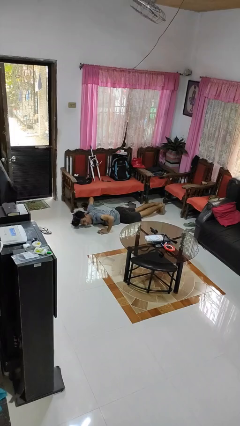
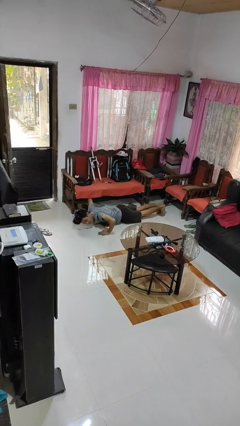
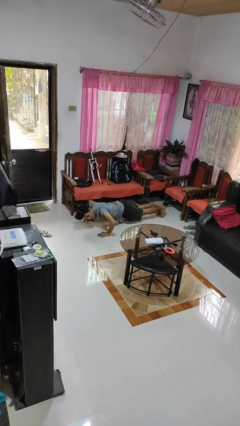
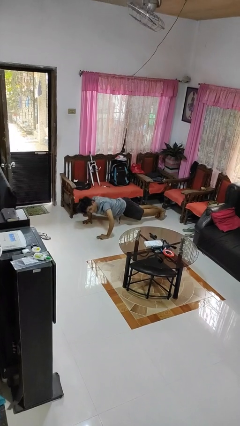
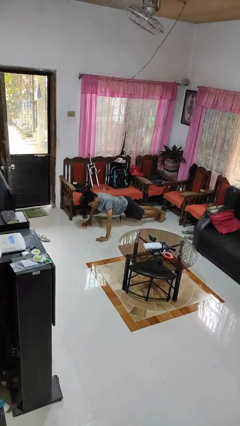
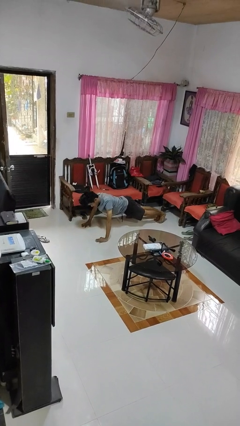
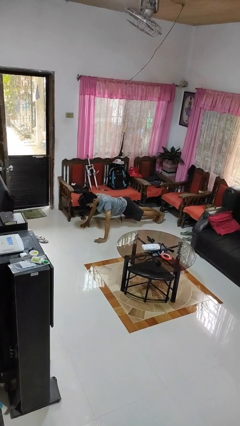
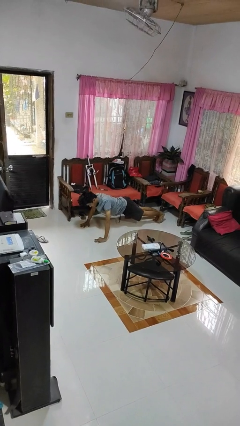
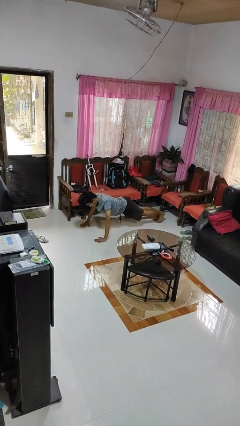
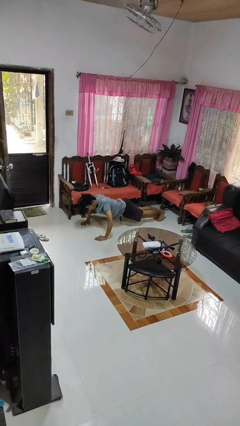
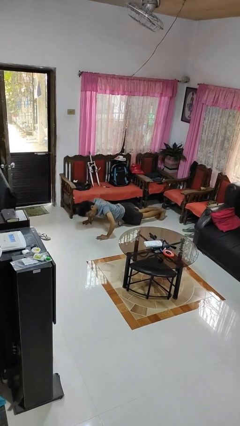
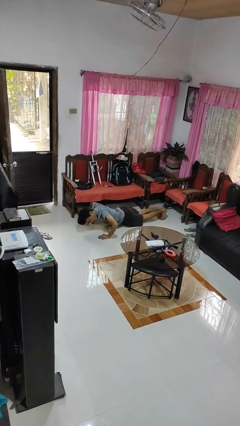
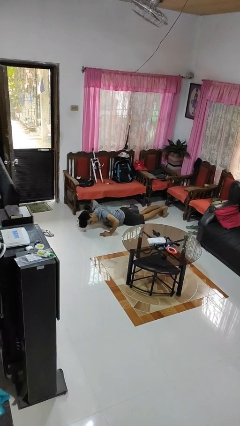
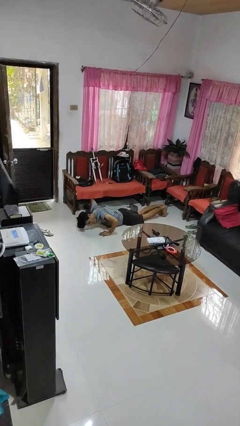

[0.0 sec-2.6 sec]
person exercises with pushup

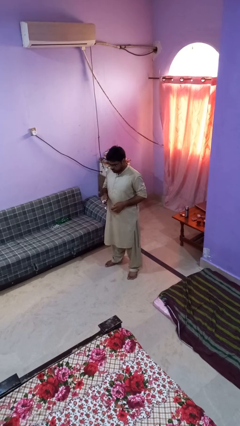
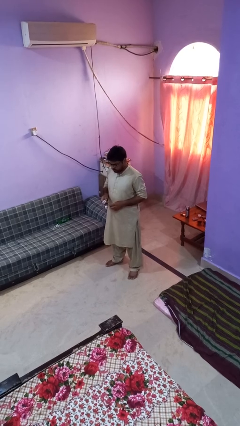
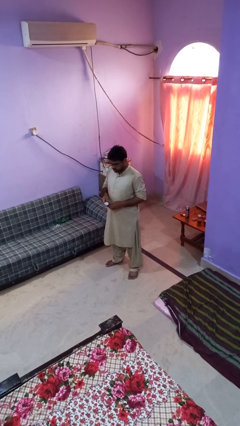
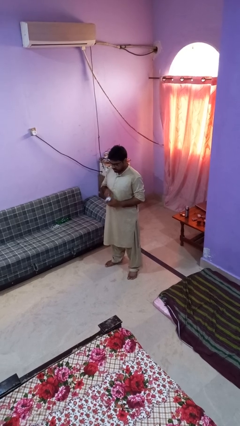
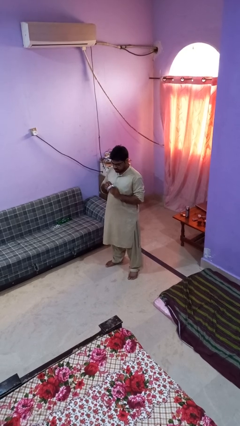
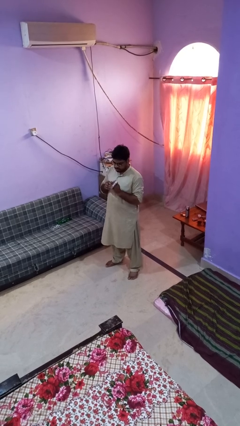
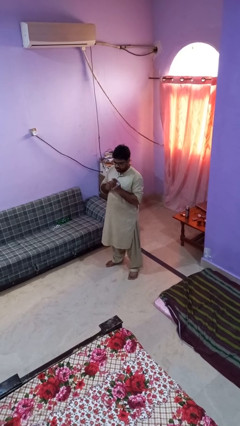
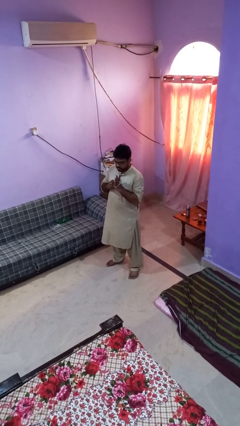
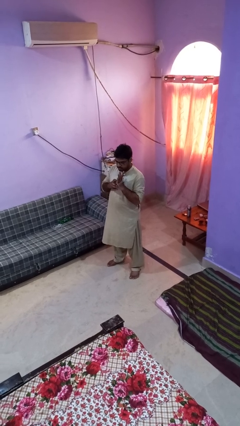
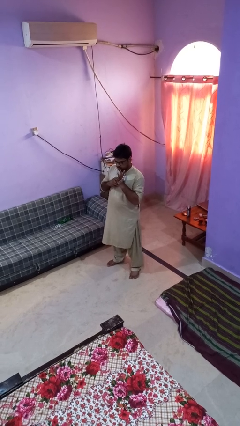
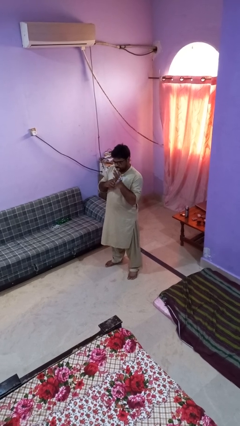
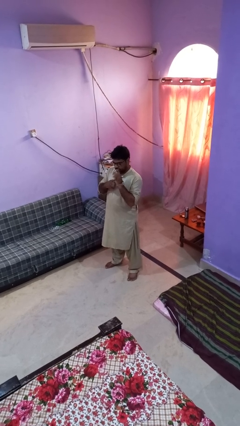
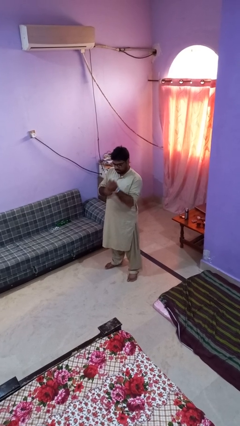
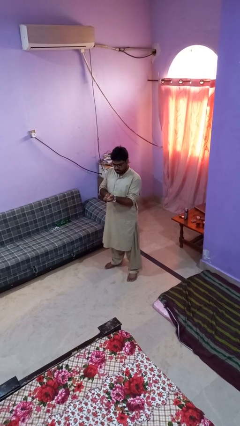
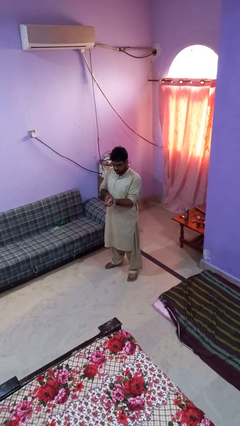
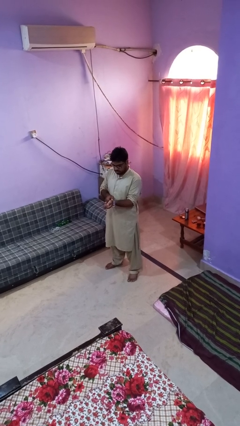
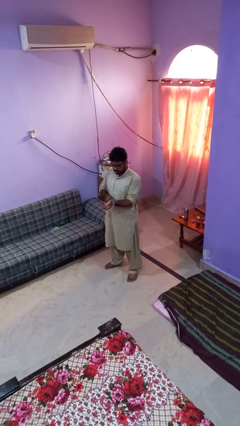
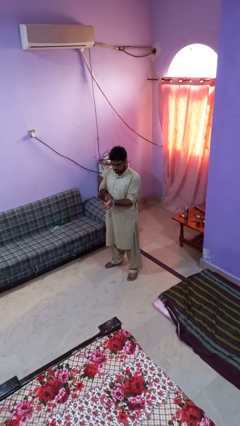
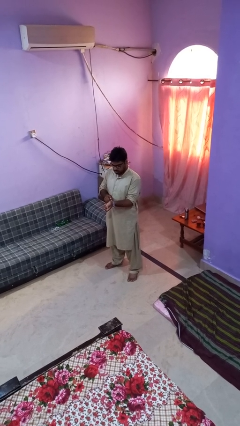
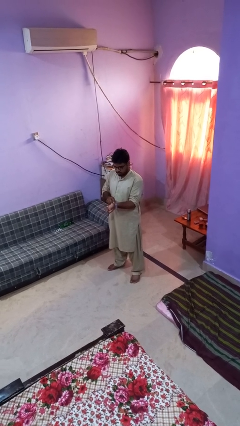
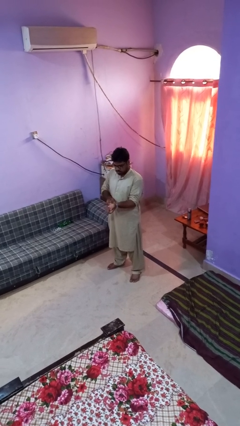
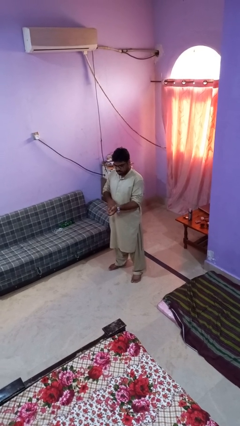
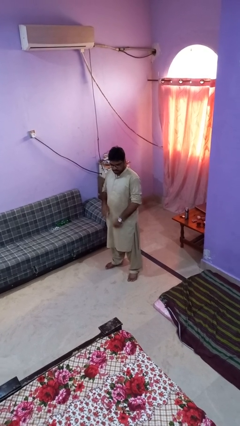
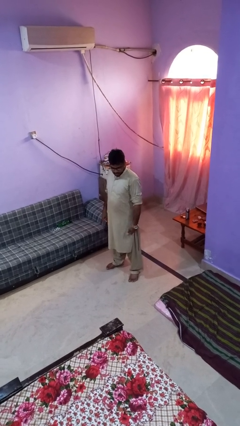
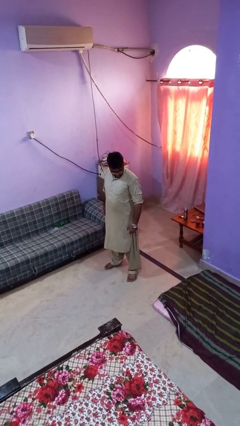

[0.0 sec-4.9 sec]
person puts on wristwatch

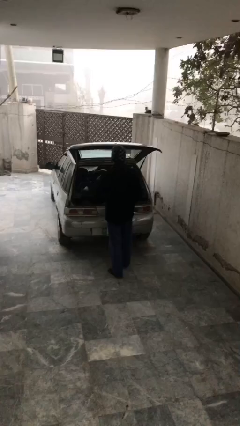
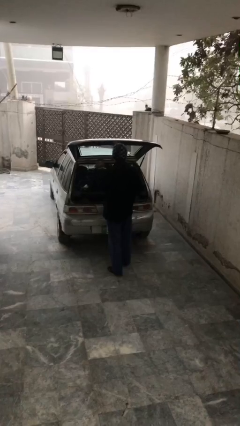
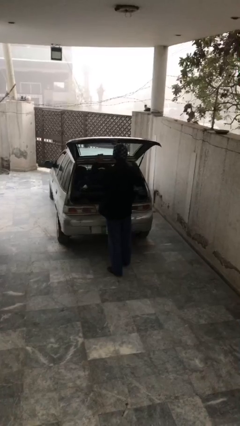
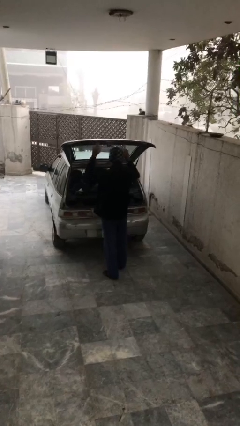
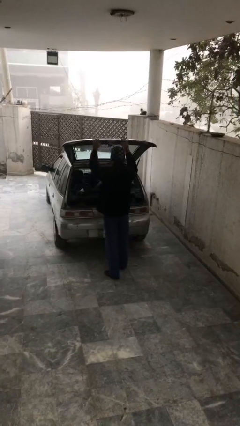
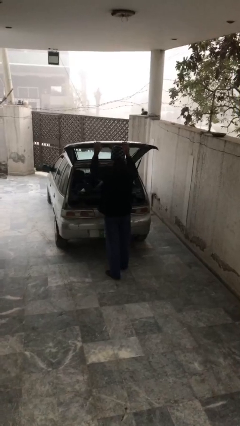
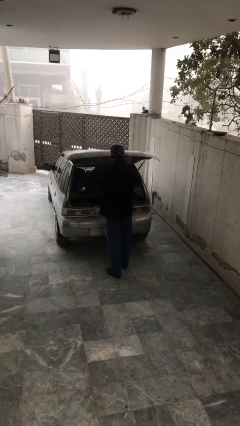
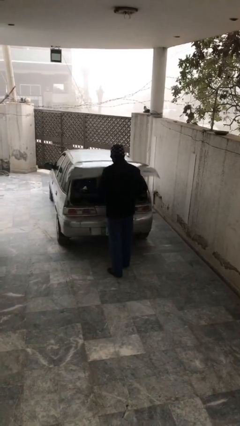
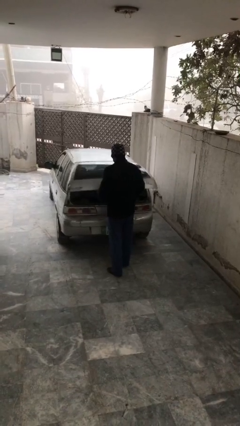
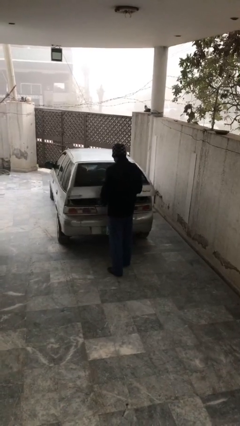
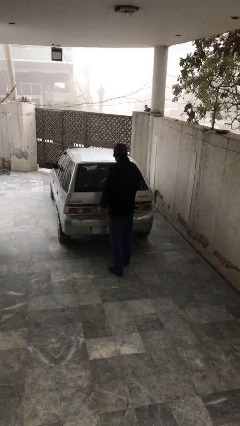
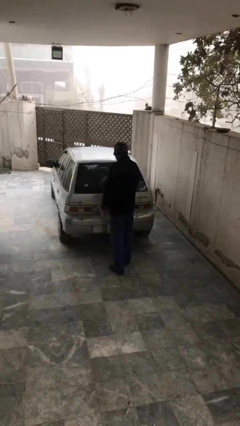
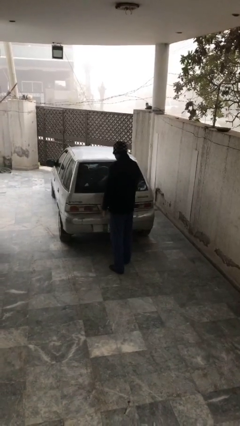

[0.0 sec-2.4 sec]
person closes car trunk

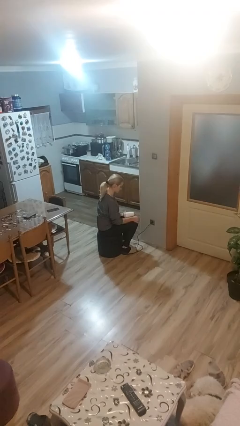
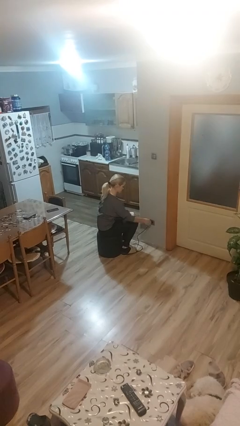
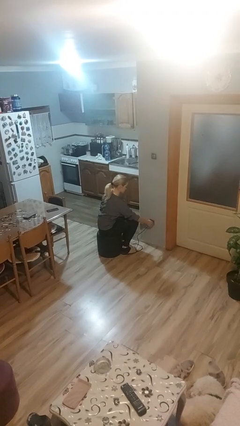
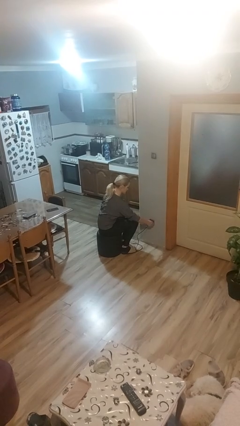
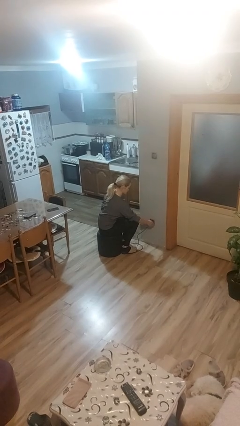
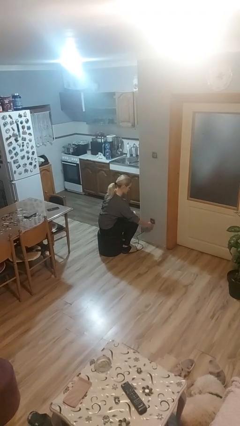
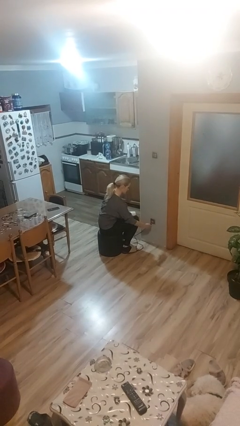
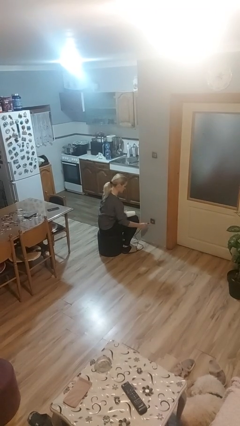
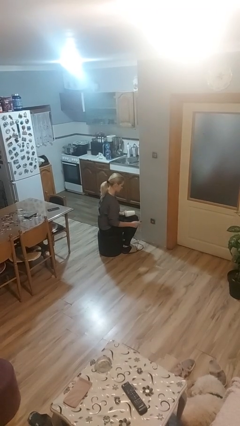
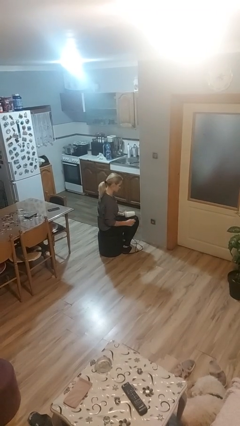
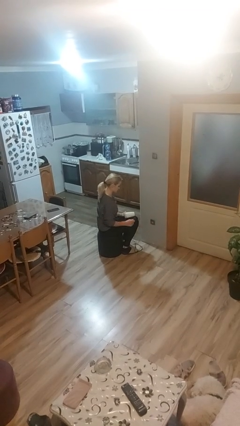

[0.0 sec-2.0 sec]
person unplugs from electrical socket

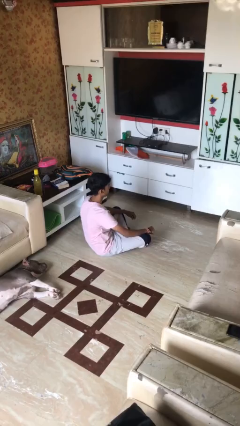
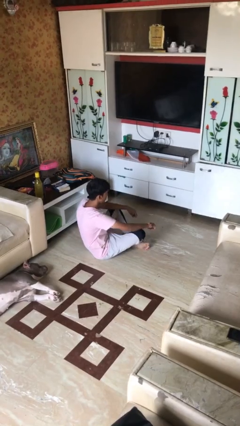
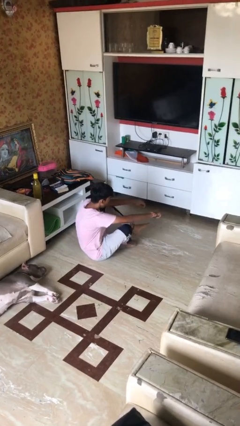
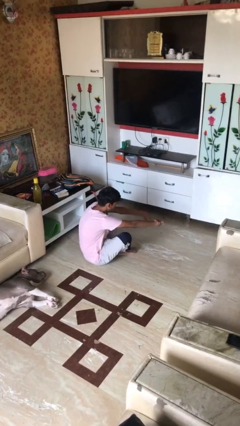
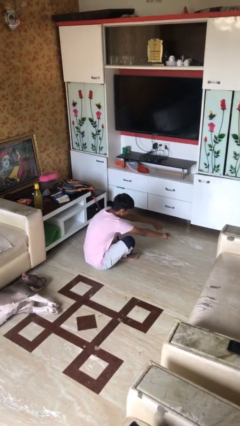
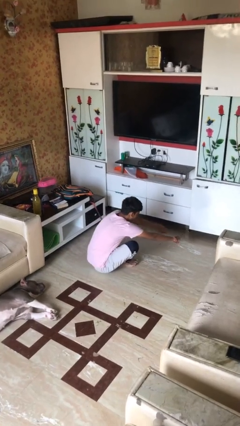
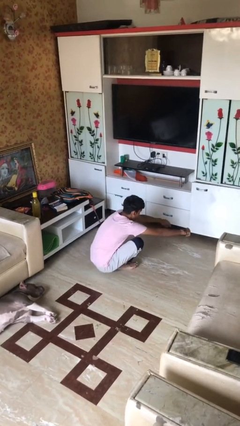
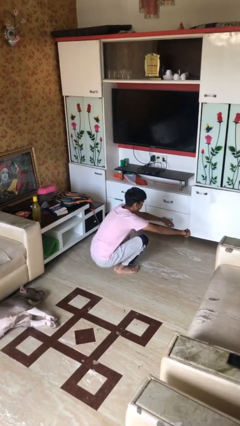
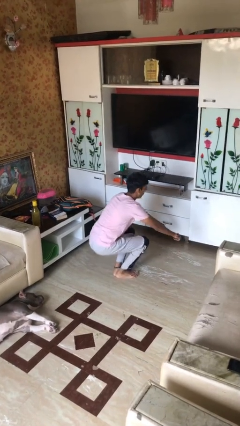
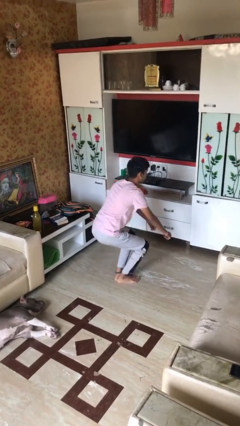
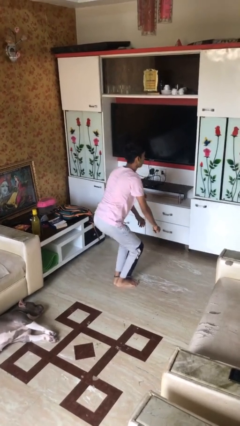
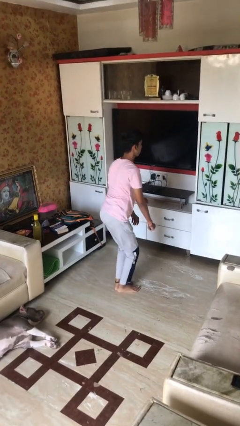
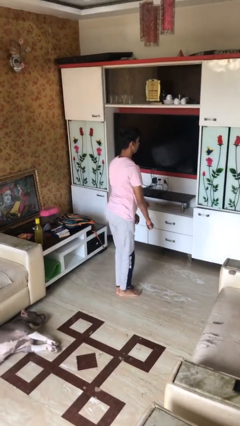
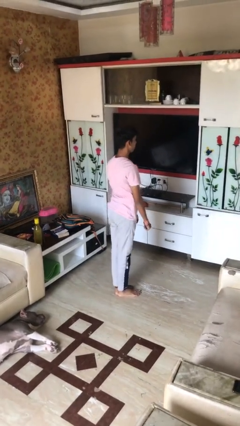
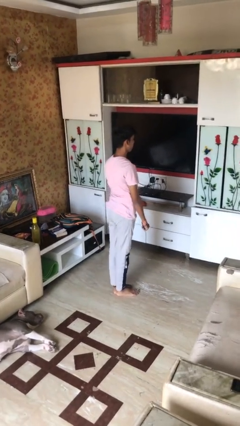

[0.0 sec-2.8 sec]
person stands up from floor

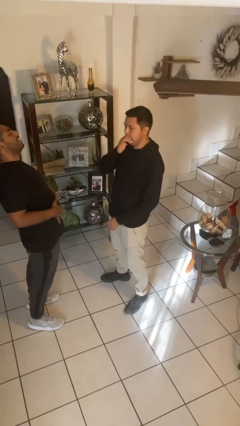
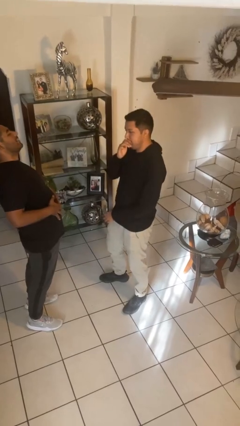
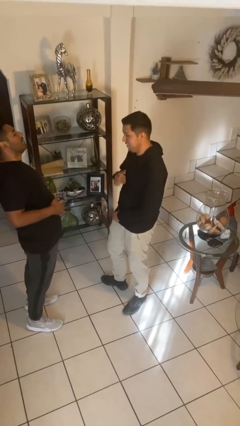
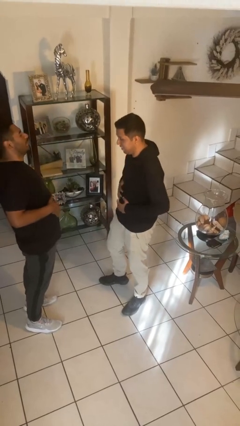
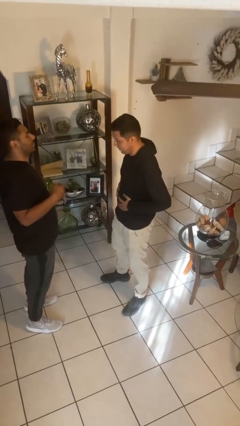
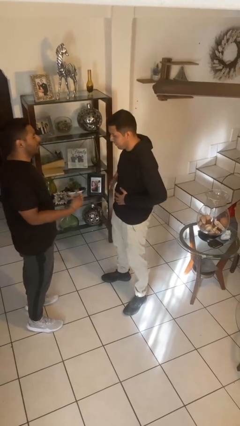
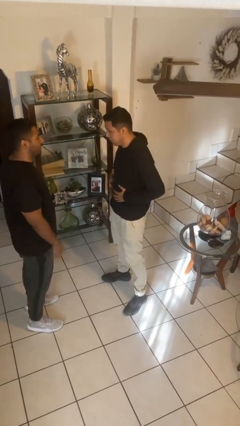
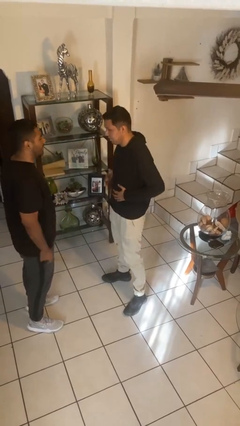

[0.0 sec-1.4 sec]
person laughs with person

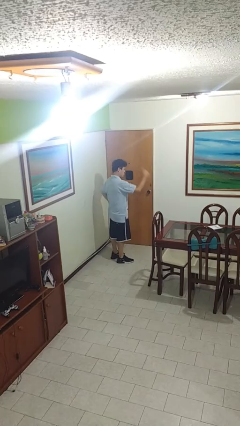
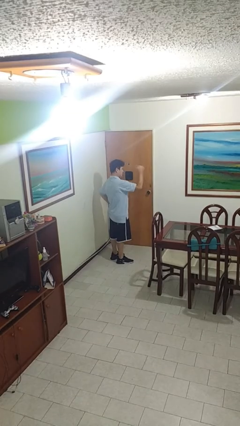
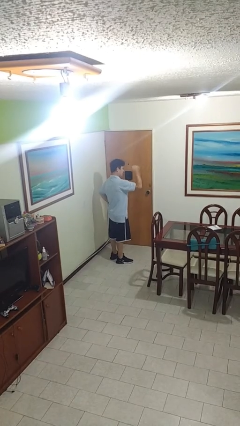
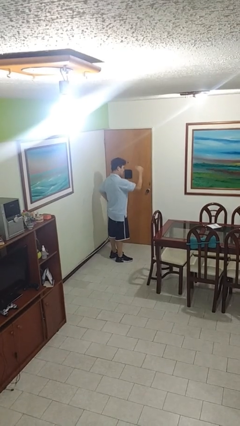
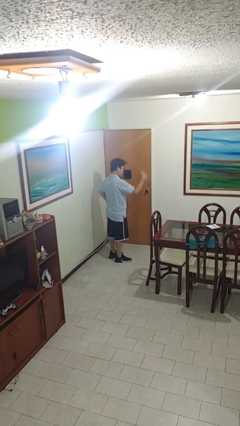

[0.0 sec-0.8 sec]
person gestures behind me

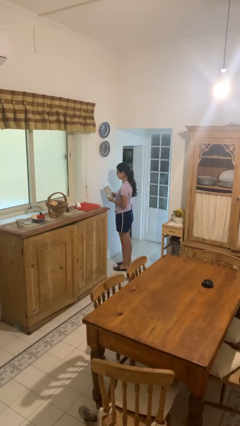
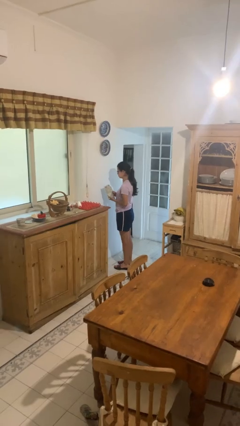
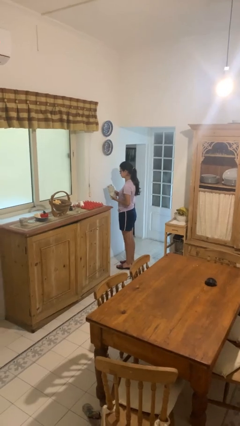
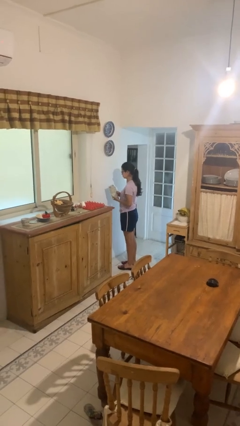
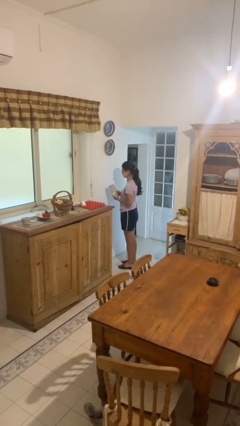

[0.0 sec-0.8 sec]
person eats snack from bag
